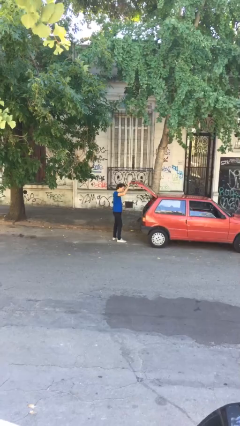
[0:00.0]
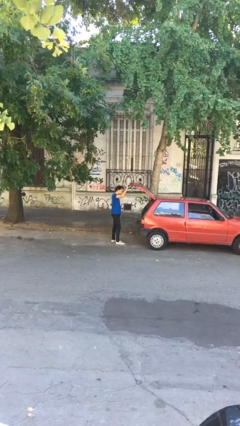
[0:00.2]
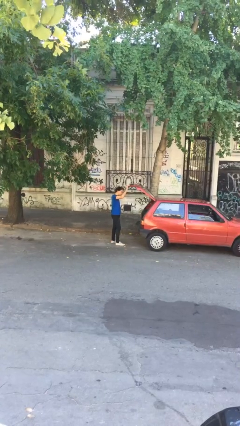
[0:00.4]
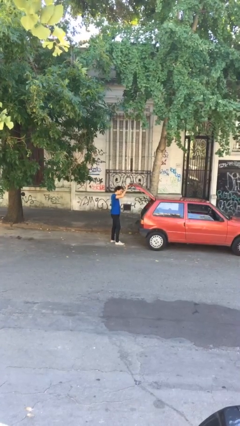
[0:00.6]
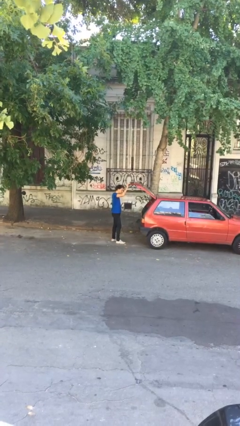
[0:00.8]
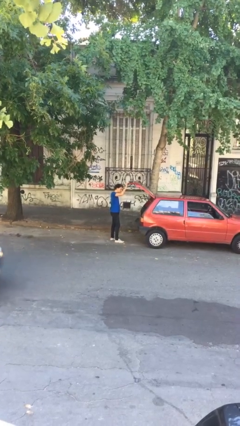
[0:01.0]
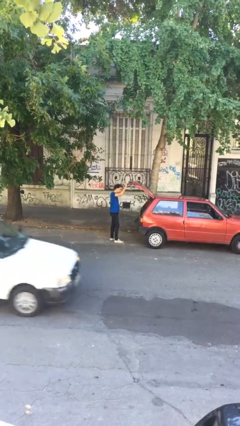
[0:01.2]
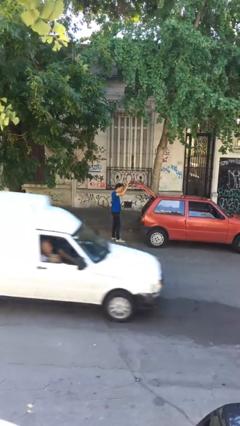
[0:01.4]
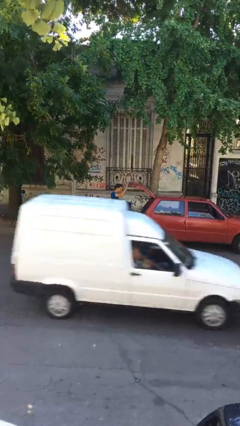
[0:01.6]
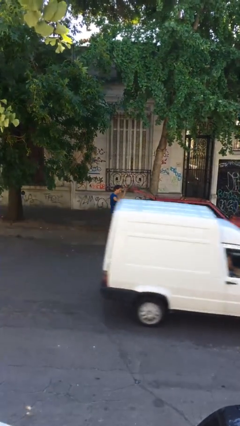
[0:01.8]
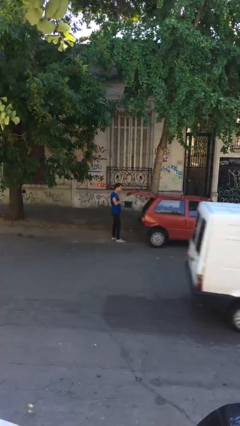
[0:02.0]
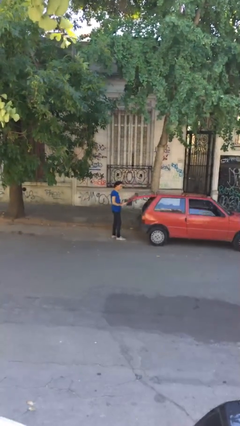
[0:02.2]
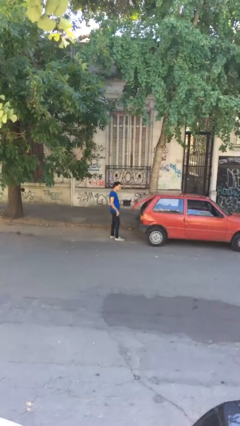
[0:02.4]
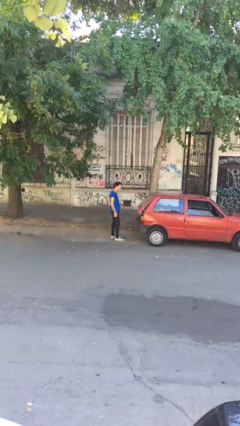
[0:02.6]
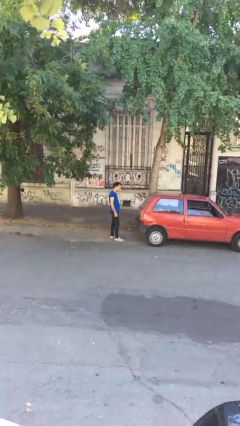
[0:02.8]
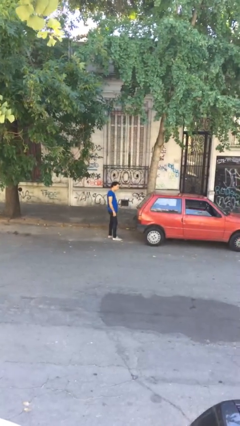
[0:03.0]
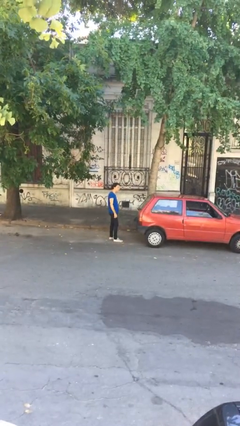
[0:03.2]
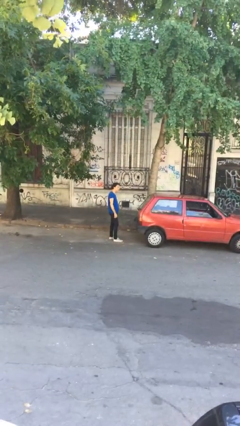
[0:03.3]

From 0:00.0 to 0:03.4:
person closes car trunk

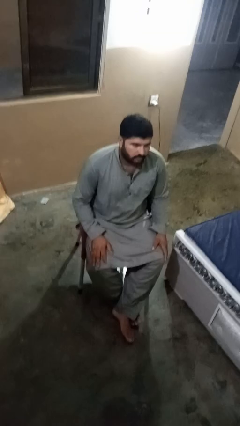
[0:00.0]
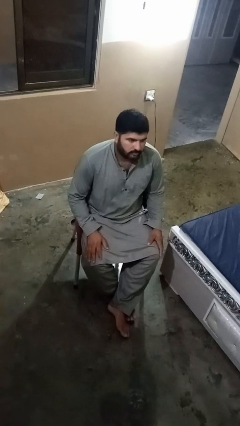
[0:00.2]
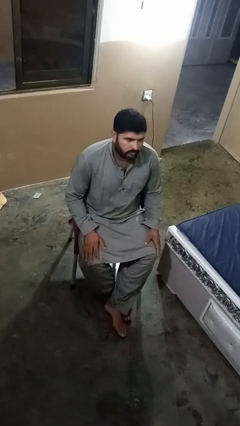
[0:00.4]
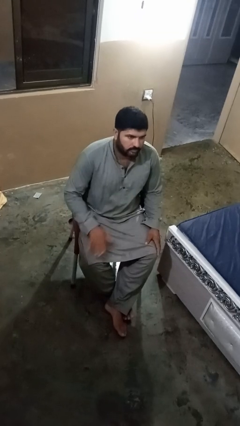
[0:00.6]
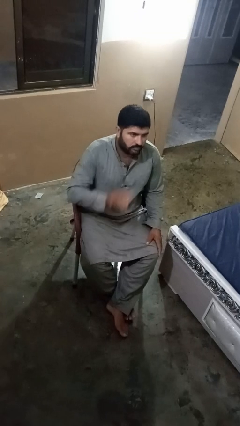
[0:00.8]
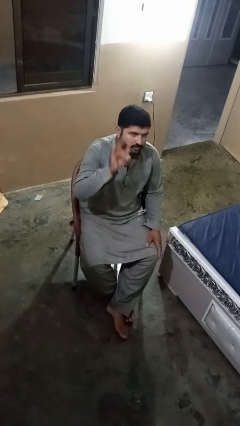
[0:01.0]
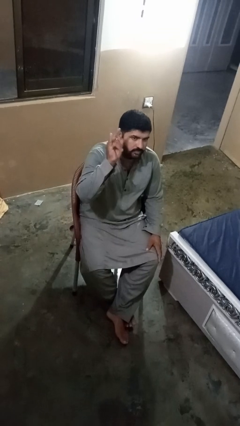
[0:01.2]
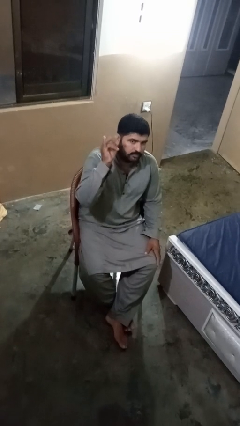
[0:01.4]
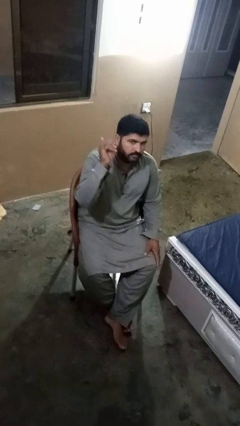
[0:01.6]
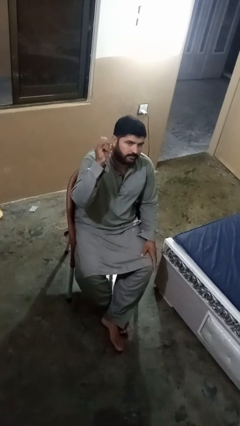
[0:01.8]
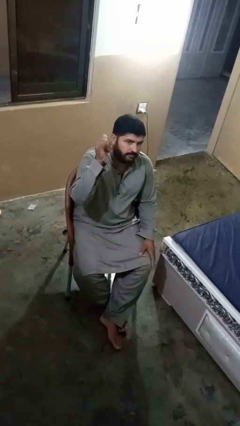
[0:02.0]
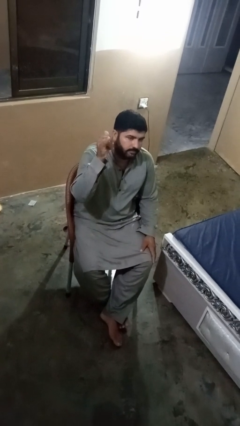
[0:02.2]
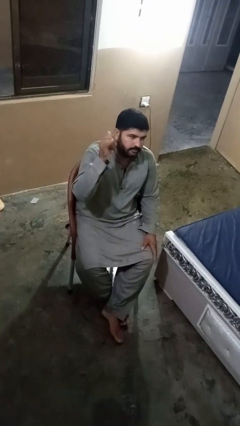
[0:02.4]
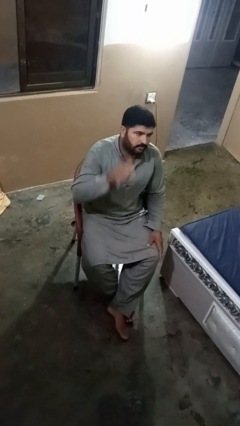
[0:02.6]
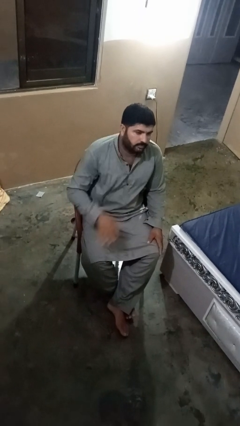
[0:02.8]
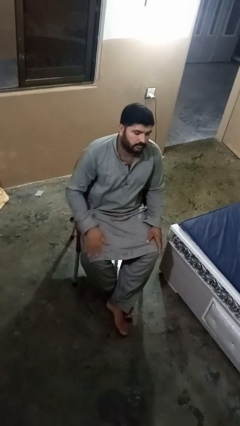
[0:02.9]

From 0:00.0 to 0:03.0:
person gestures hang loose

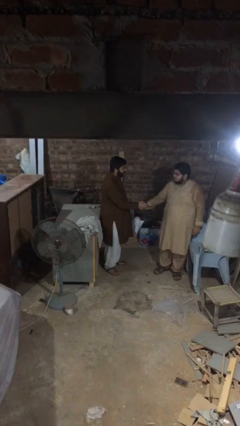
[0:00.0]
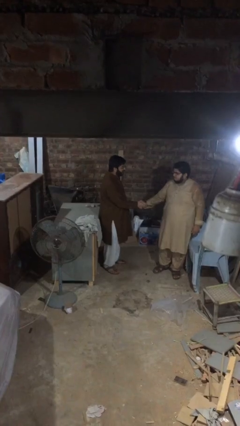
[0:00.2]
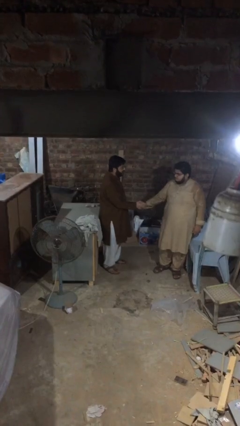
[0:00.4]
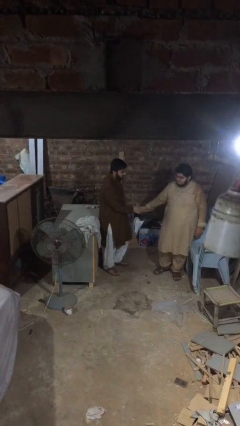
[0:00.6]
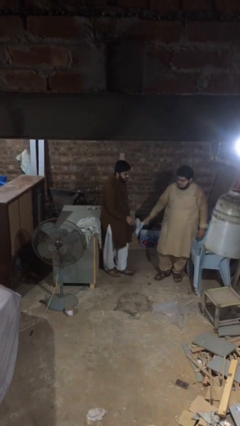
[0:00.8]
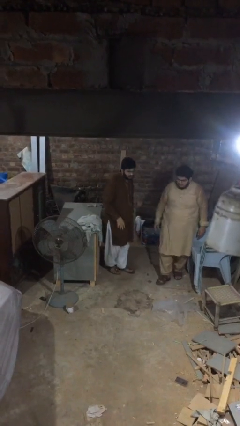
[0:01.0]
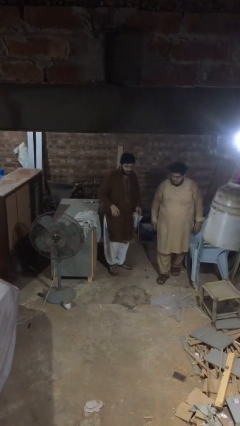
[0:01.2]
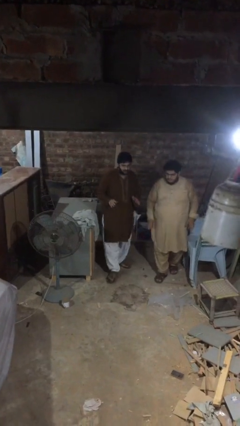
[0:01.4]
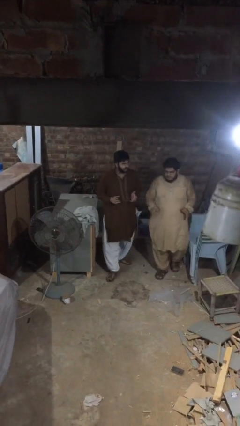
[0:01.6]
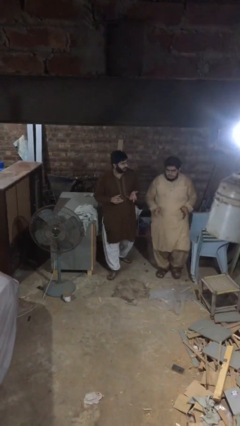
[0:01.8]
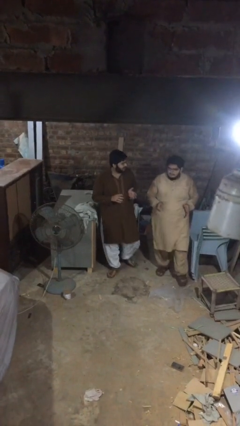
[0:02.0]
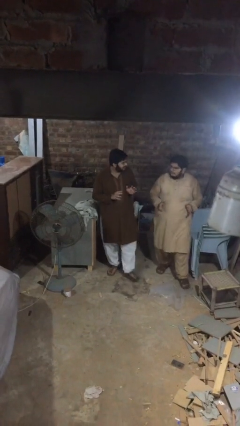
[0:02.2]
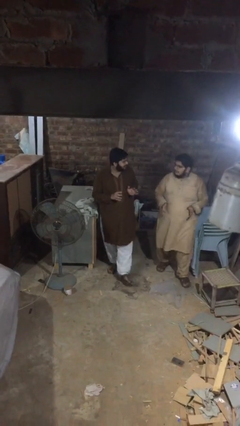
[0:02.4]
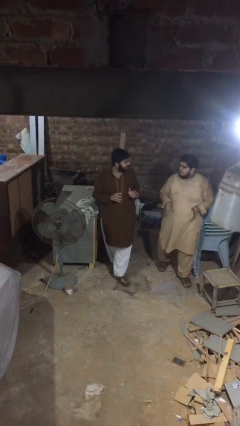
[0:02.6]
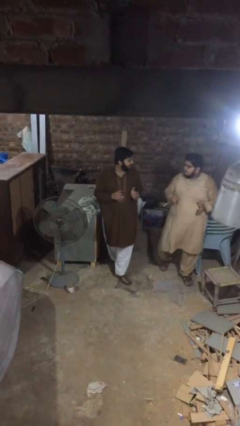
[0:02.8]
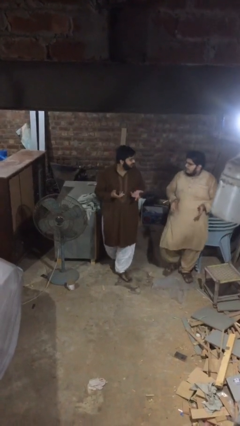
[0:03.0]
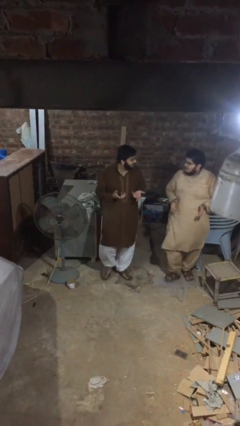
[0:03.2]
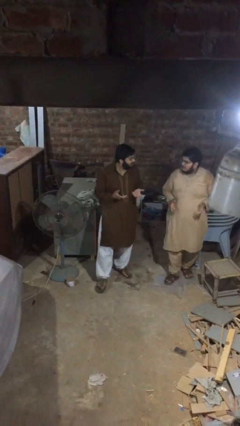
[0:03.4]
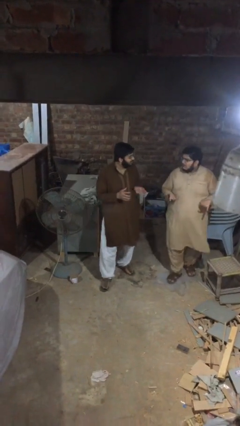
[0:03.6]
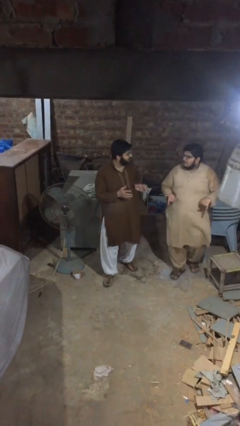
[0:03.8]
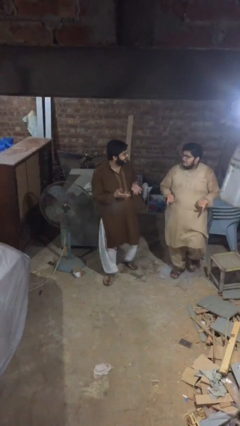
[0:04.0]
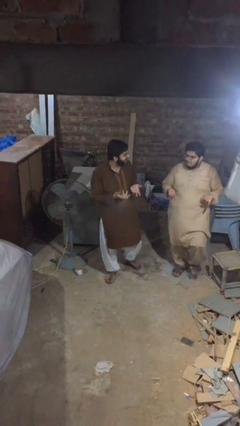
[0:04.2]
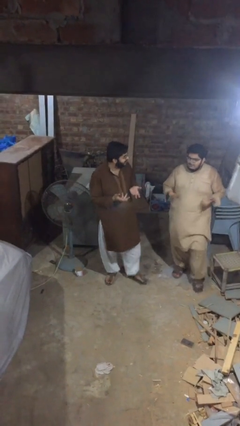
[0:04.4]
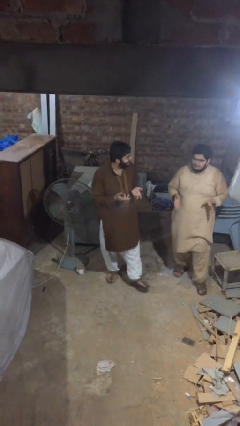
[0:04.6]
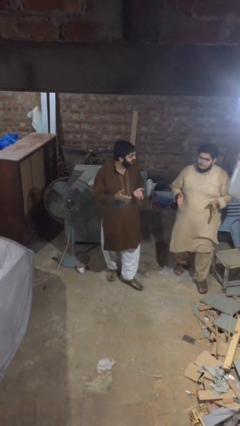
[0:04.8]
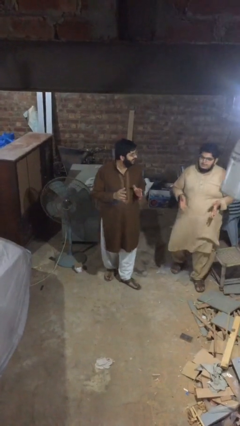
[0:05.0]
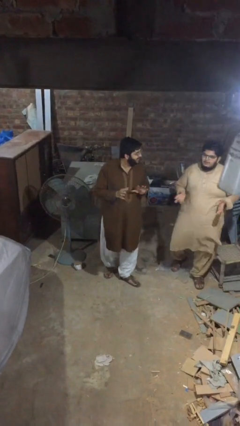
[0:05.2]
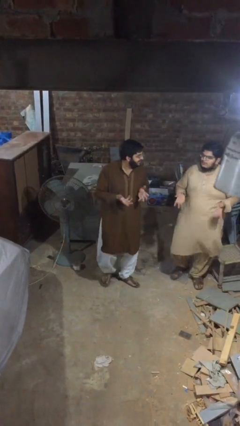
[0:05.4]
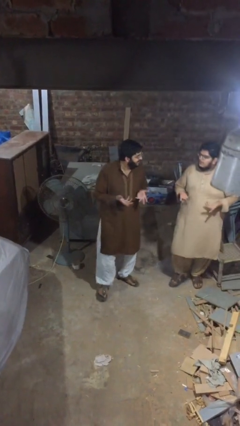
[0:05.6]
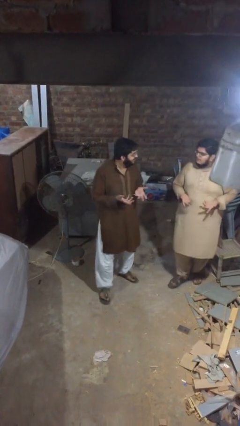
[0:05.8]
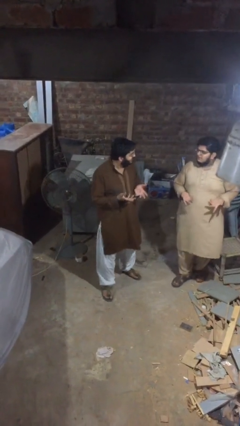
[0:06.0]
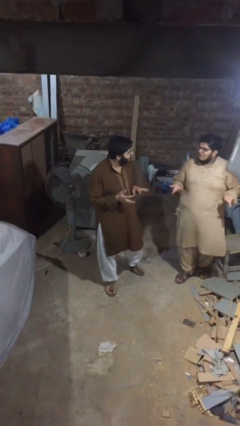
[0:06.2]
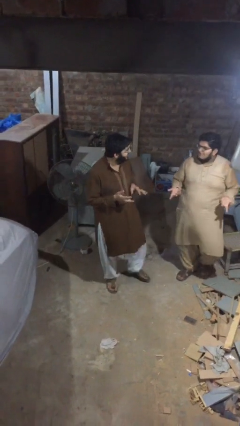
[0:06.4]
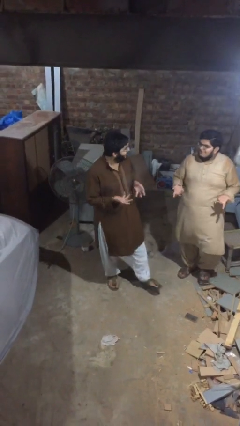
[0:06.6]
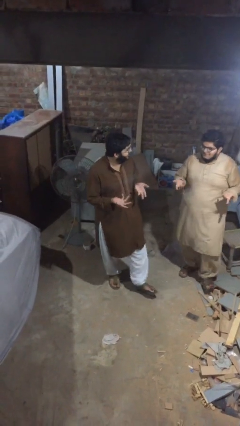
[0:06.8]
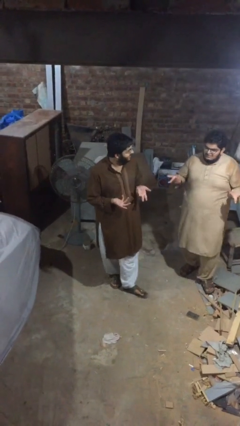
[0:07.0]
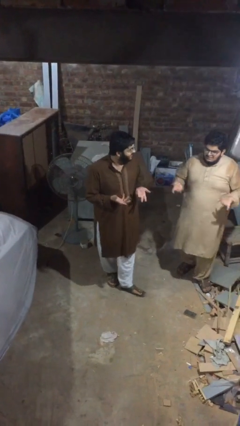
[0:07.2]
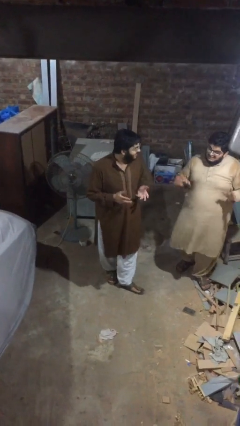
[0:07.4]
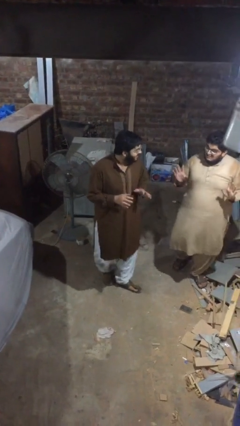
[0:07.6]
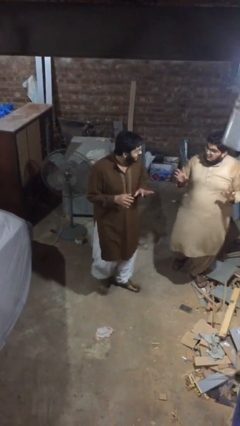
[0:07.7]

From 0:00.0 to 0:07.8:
person talks to person

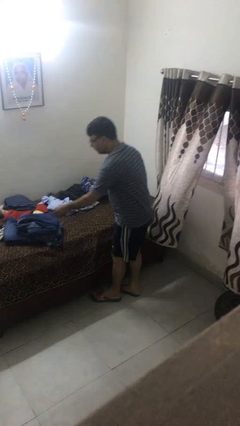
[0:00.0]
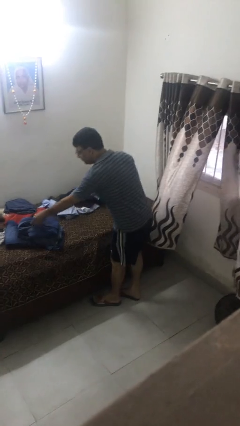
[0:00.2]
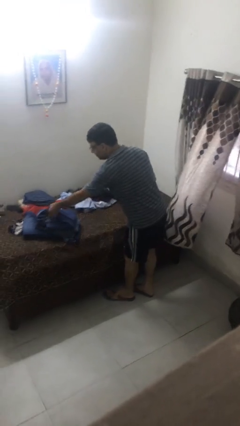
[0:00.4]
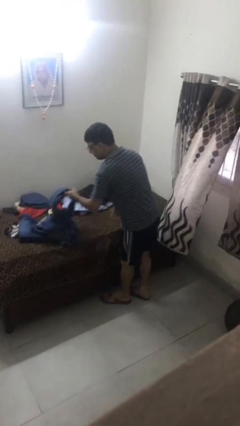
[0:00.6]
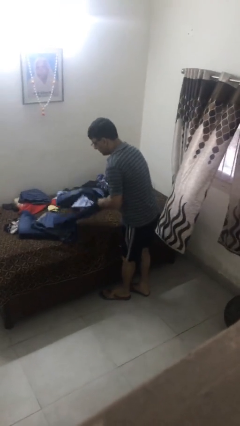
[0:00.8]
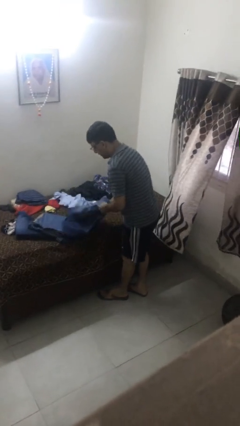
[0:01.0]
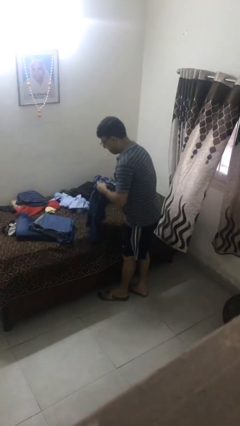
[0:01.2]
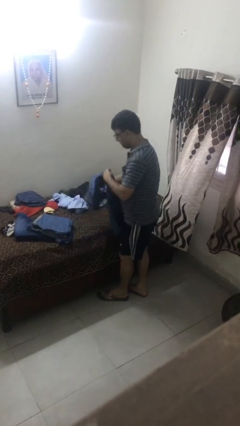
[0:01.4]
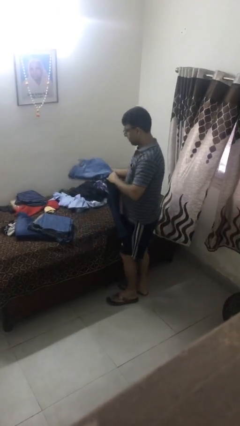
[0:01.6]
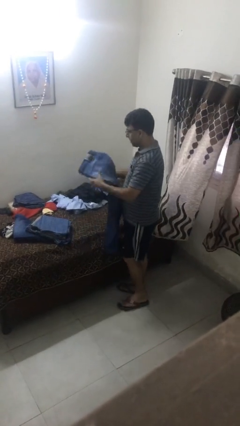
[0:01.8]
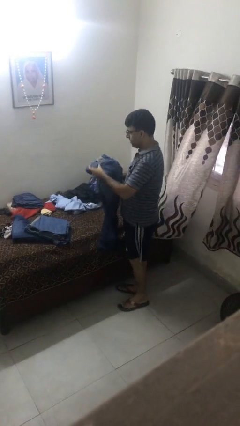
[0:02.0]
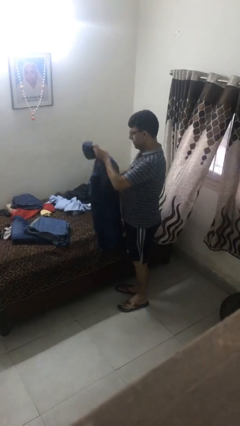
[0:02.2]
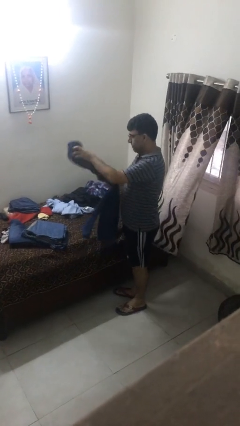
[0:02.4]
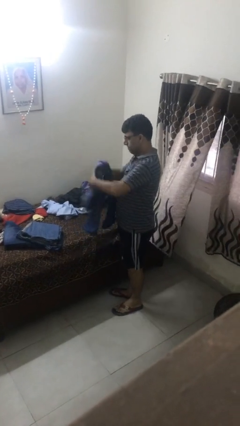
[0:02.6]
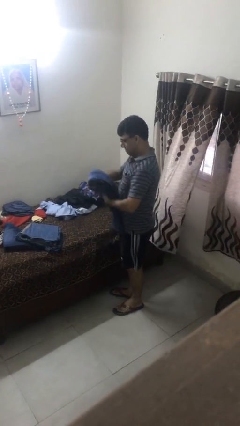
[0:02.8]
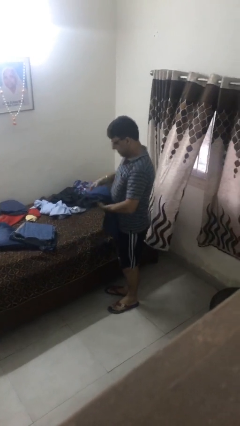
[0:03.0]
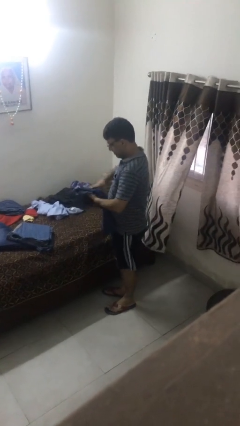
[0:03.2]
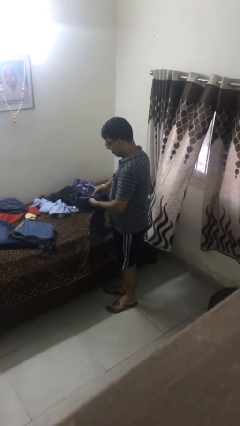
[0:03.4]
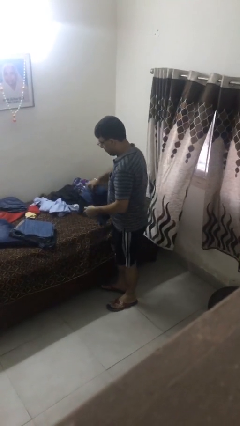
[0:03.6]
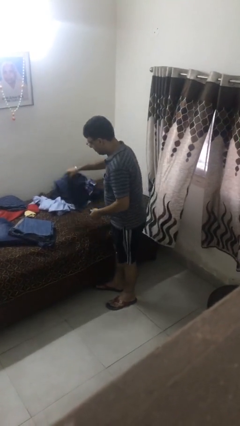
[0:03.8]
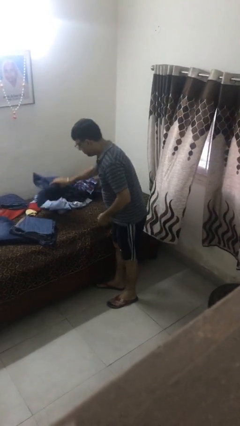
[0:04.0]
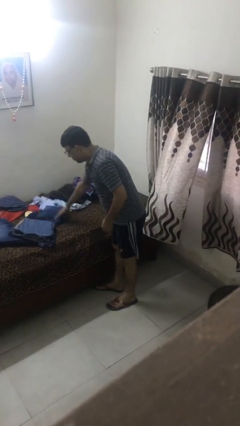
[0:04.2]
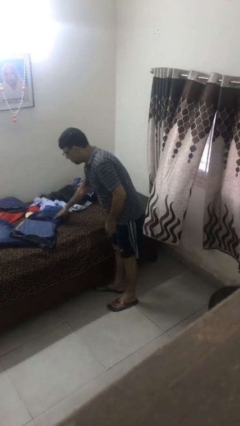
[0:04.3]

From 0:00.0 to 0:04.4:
person folds pants
